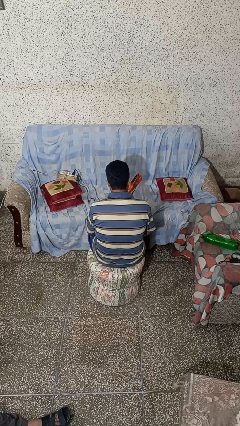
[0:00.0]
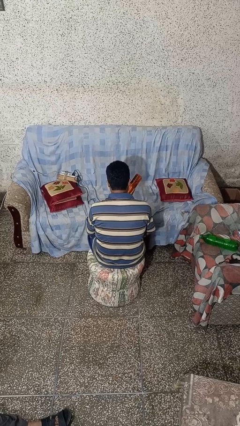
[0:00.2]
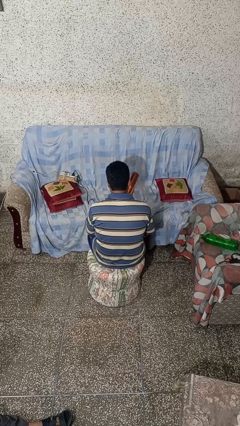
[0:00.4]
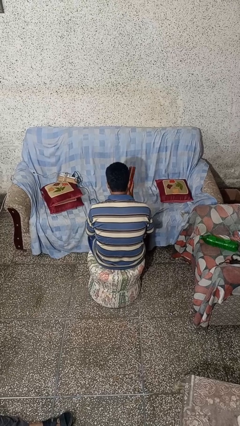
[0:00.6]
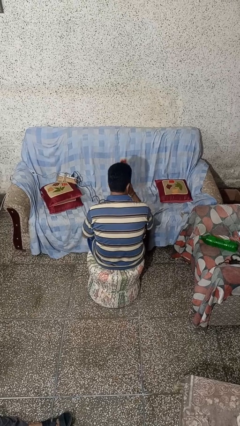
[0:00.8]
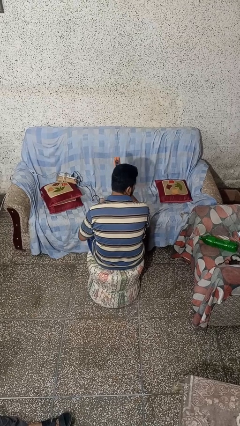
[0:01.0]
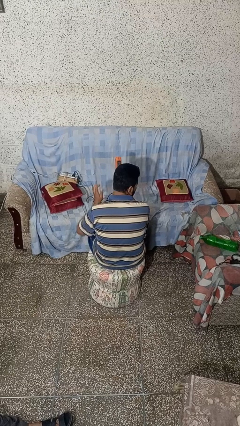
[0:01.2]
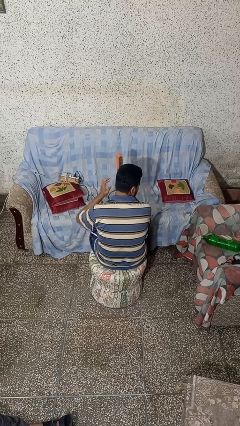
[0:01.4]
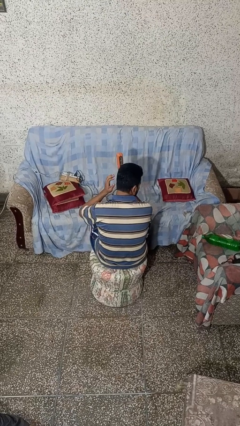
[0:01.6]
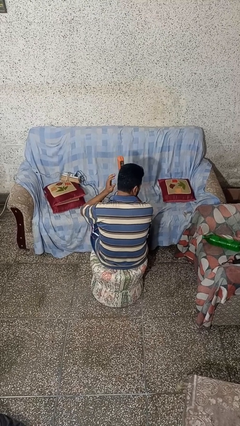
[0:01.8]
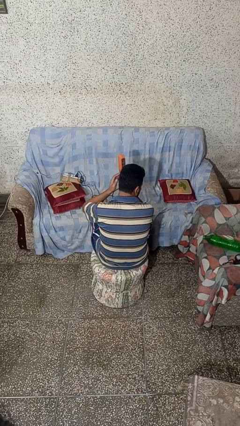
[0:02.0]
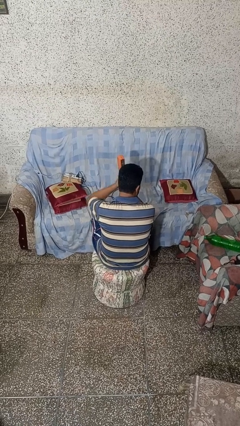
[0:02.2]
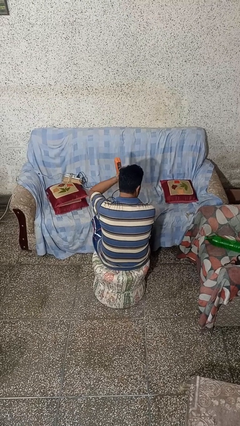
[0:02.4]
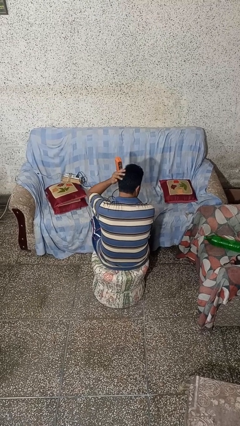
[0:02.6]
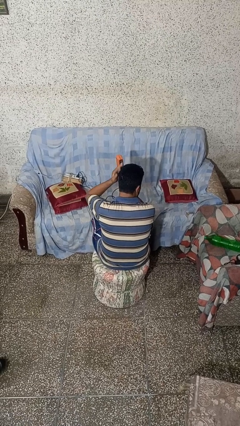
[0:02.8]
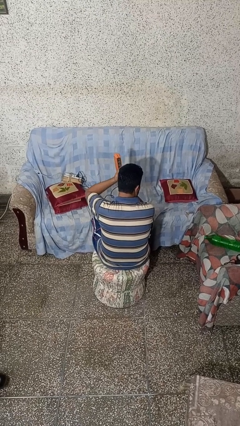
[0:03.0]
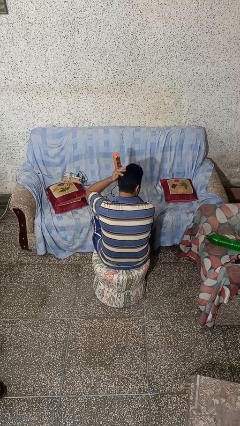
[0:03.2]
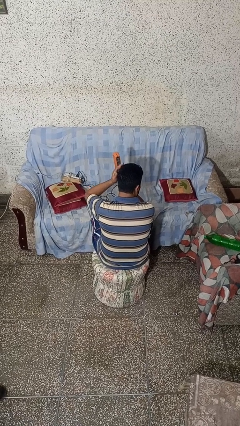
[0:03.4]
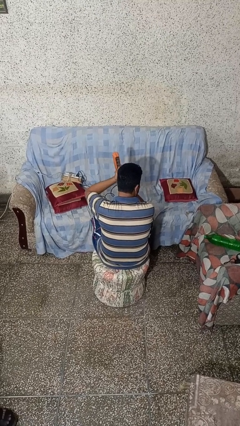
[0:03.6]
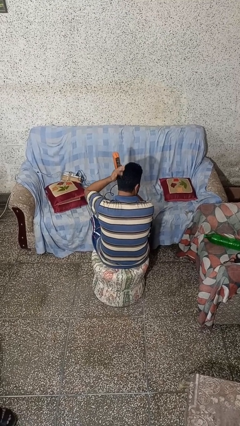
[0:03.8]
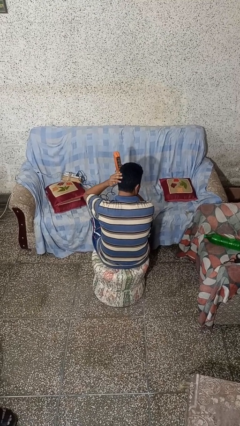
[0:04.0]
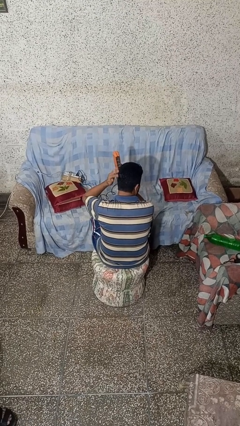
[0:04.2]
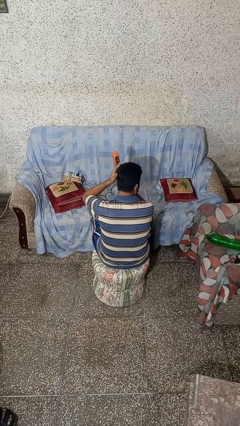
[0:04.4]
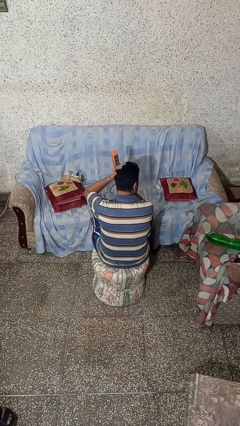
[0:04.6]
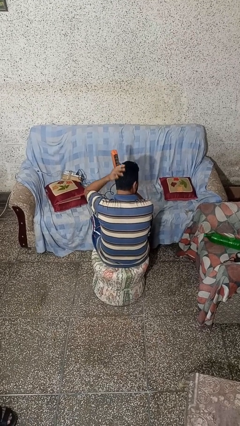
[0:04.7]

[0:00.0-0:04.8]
person dries hair with hairdryer

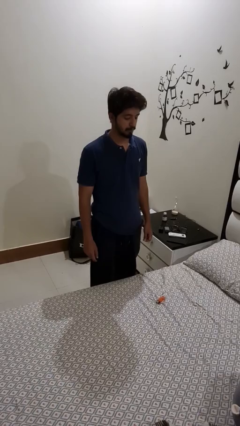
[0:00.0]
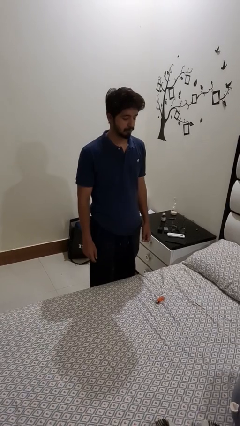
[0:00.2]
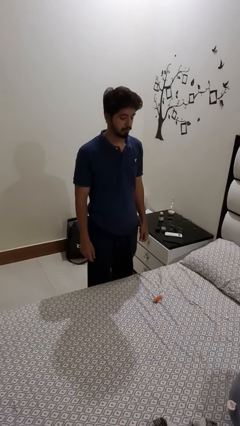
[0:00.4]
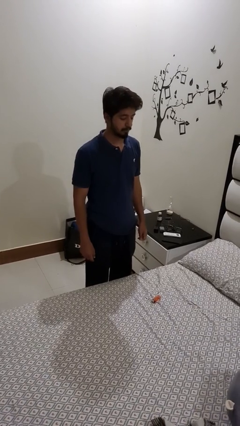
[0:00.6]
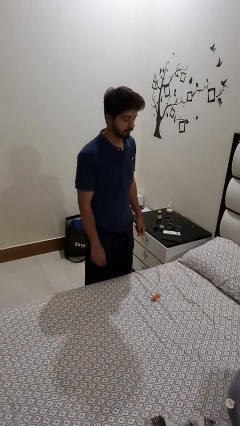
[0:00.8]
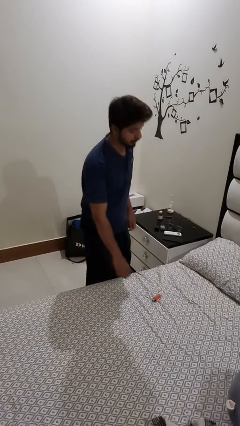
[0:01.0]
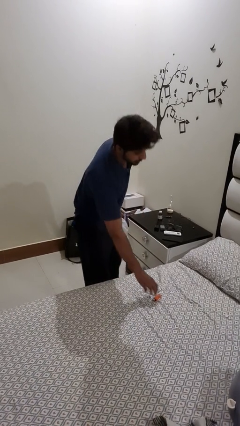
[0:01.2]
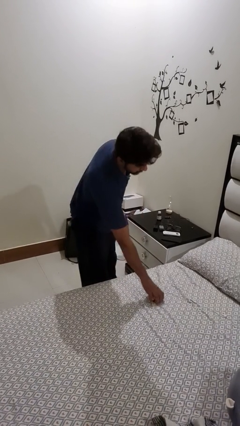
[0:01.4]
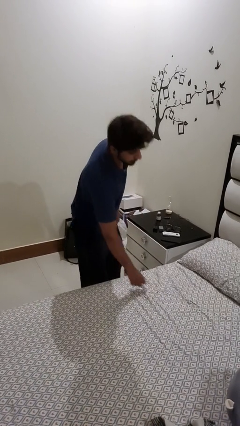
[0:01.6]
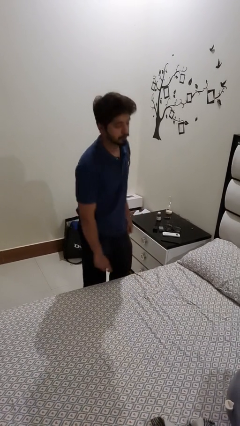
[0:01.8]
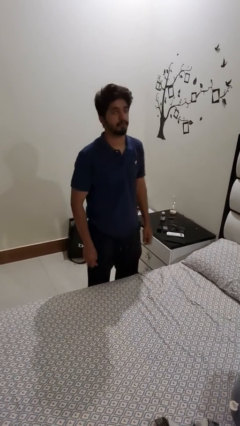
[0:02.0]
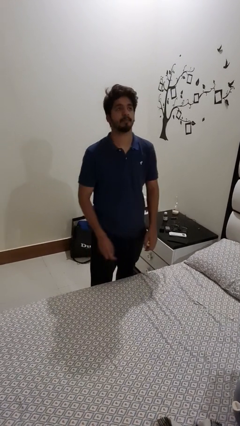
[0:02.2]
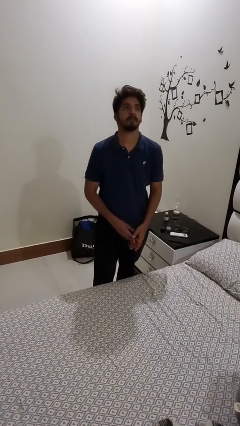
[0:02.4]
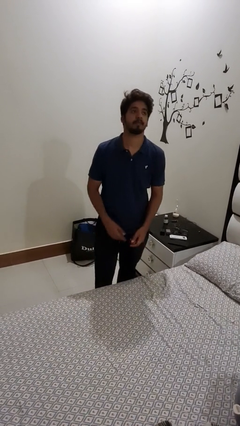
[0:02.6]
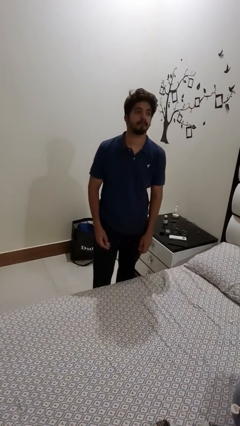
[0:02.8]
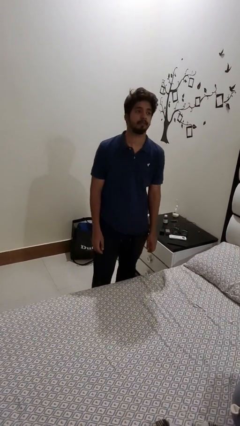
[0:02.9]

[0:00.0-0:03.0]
person picks up object from bed

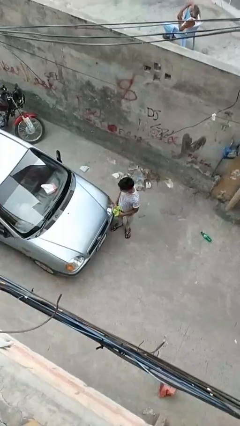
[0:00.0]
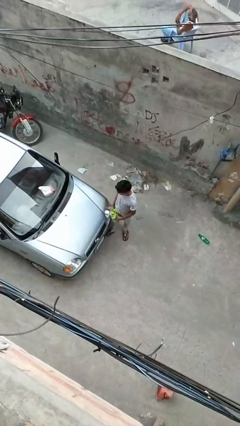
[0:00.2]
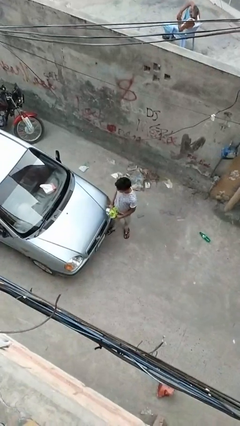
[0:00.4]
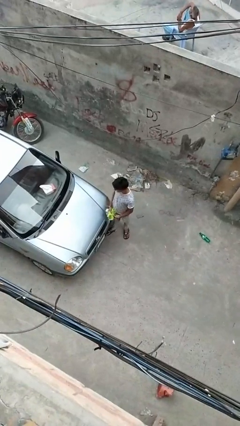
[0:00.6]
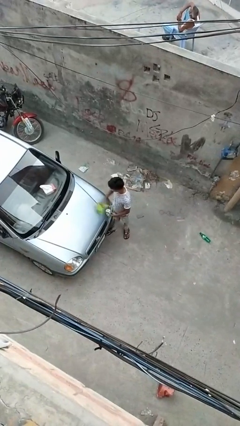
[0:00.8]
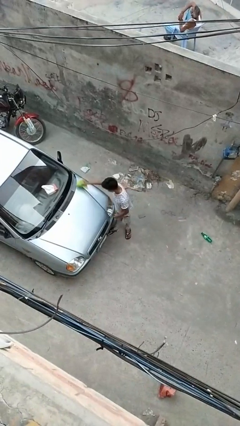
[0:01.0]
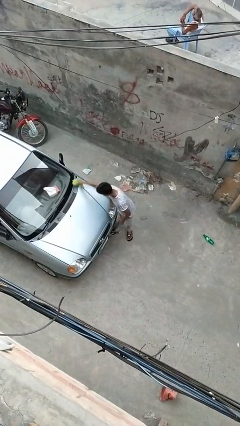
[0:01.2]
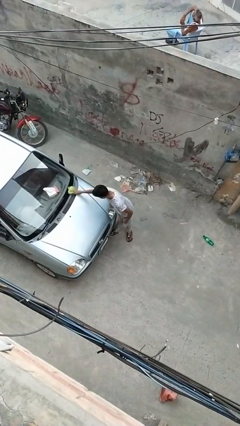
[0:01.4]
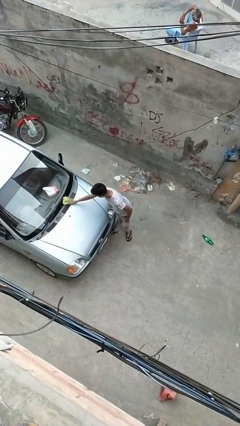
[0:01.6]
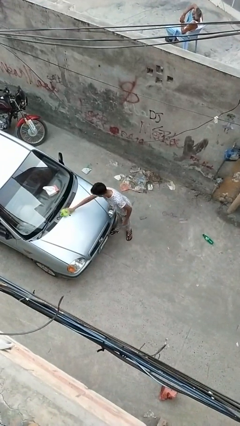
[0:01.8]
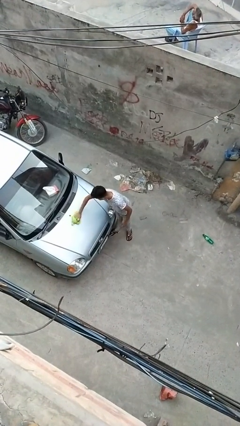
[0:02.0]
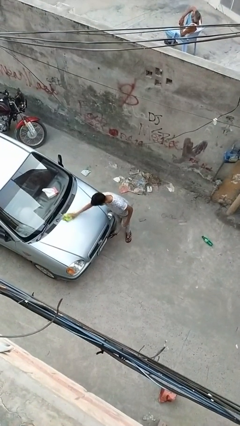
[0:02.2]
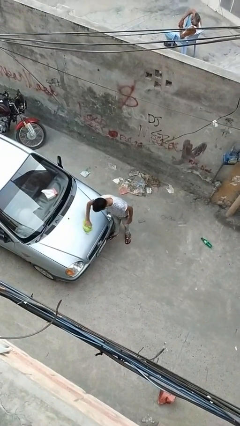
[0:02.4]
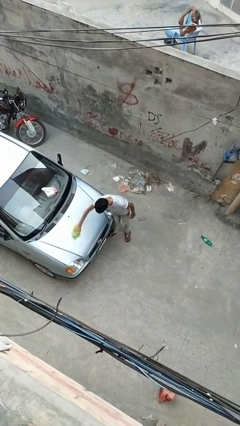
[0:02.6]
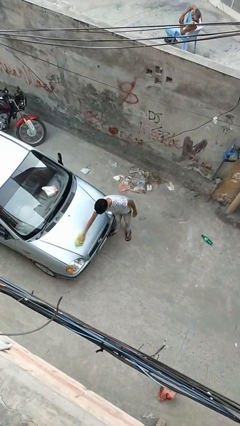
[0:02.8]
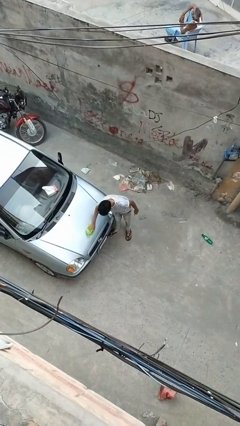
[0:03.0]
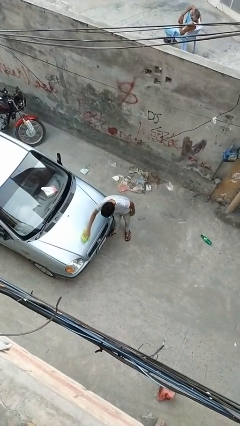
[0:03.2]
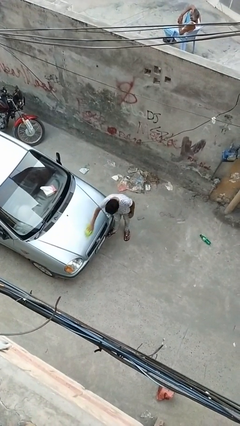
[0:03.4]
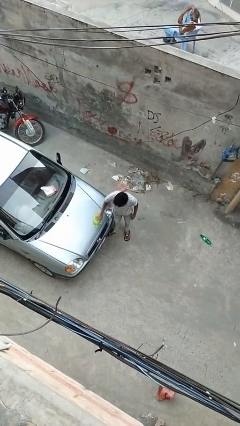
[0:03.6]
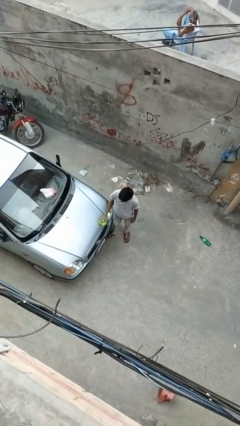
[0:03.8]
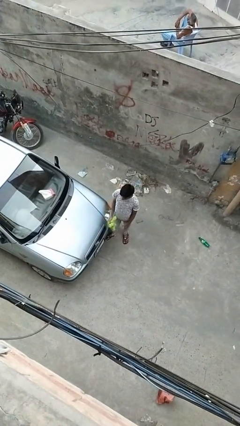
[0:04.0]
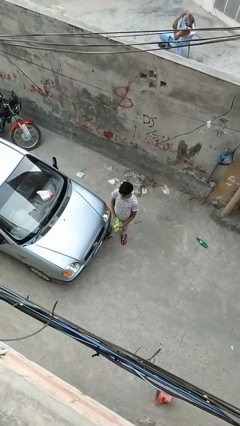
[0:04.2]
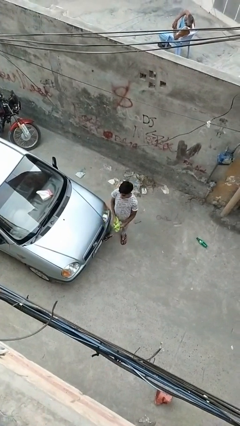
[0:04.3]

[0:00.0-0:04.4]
person polishes car with rag

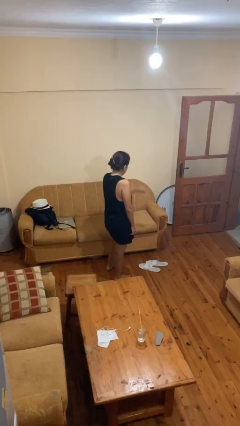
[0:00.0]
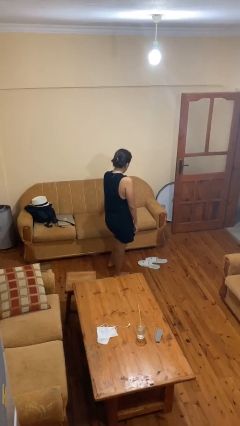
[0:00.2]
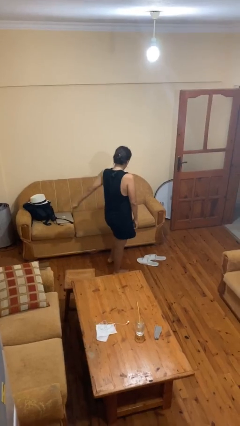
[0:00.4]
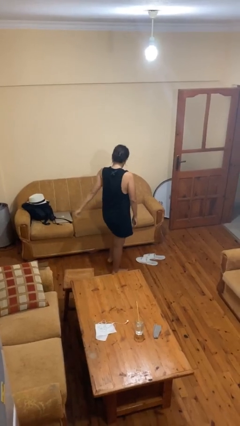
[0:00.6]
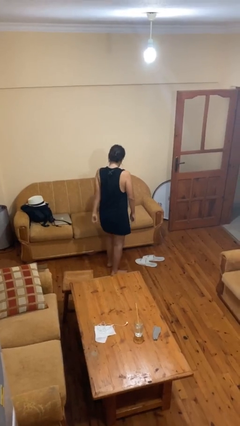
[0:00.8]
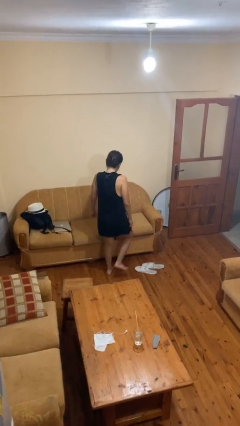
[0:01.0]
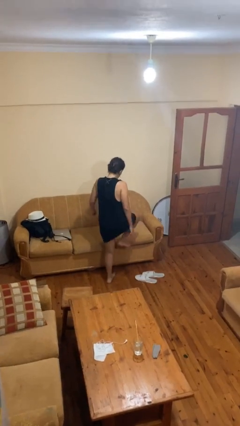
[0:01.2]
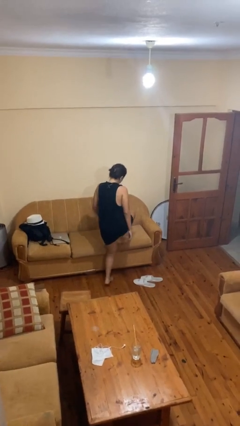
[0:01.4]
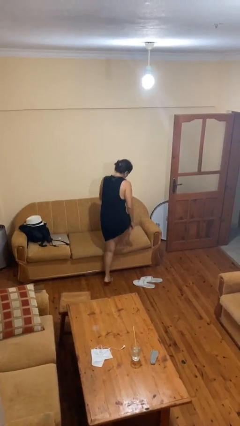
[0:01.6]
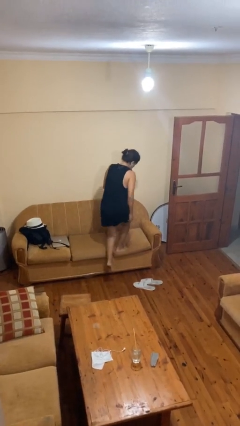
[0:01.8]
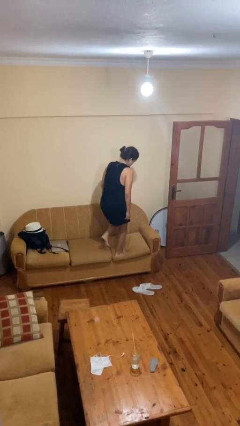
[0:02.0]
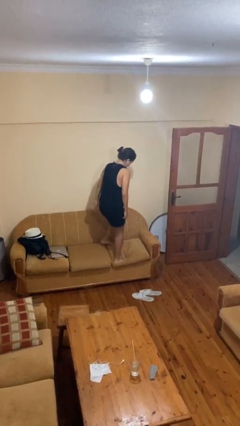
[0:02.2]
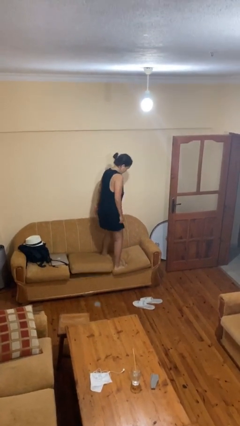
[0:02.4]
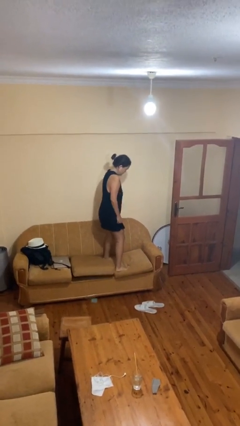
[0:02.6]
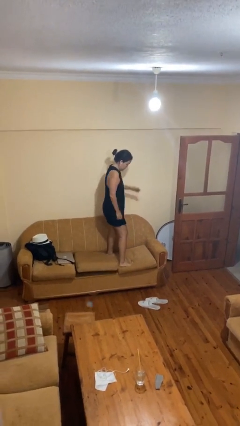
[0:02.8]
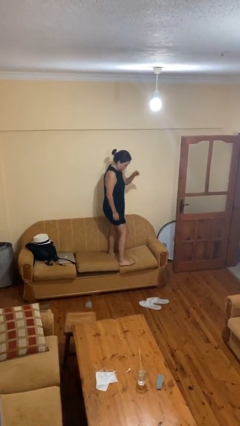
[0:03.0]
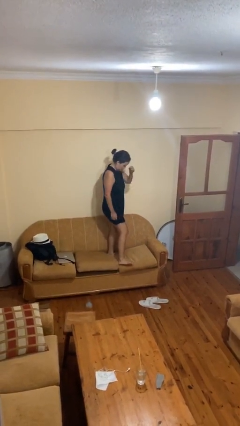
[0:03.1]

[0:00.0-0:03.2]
person climbs on couch

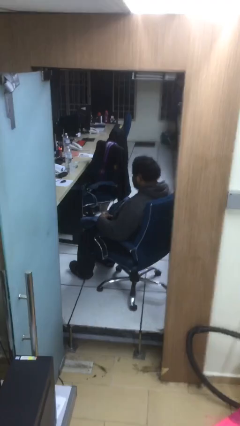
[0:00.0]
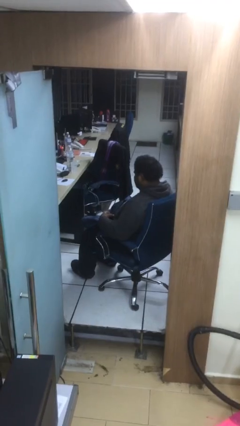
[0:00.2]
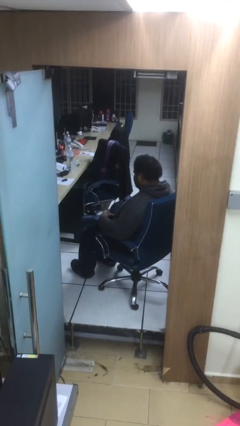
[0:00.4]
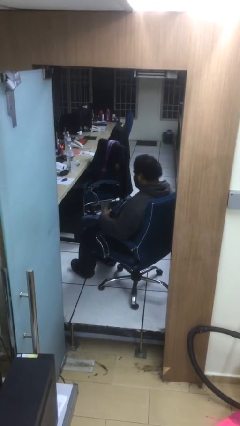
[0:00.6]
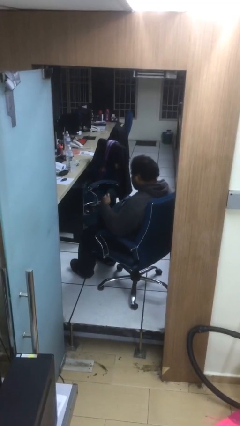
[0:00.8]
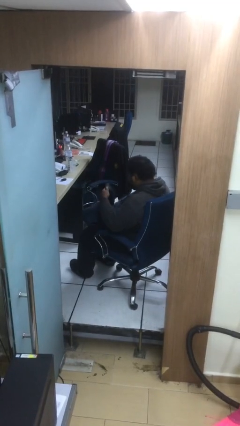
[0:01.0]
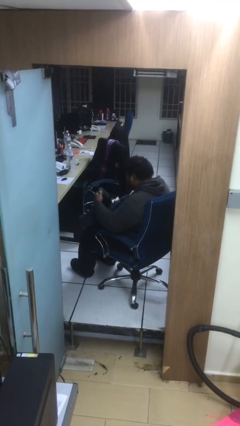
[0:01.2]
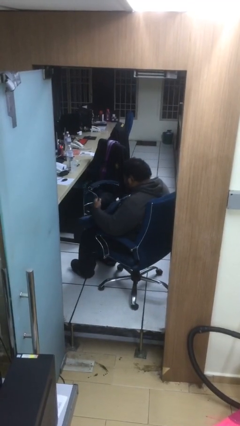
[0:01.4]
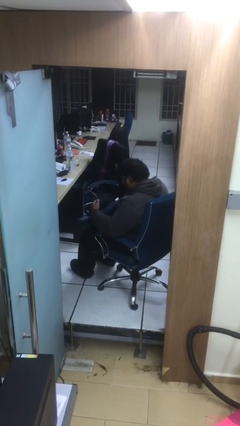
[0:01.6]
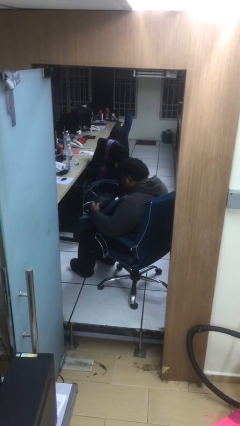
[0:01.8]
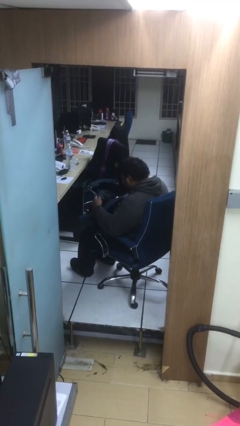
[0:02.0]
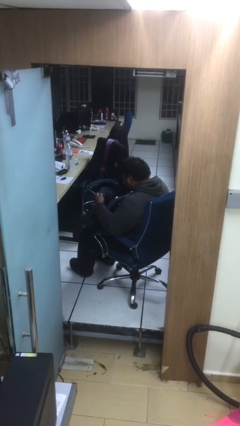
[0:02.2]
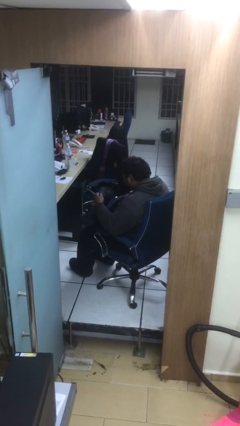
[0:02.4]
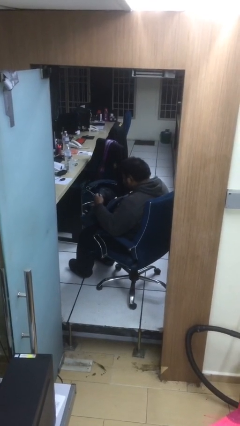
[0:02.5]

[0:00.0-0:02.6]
person searches in backpack
